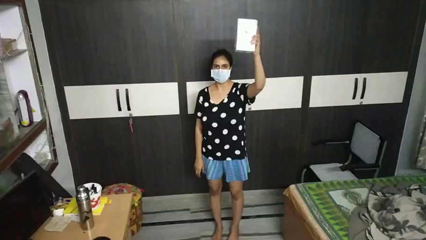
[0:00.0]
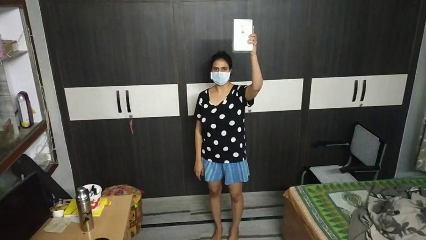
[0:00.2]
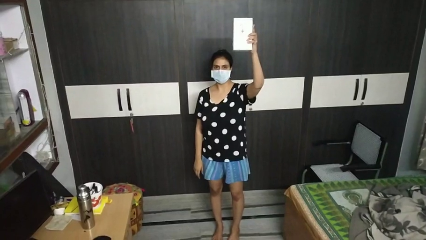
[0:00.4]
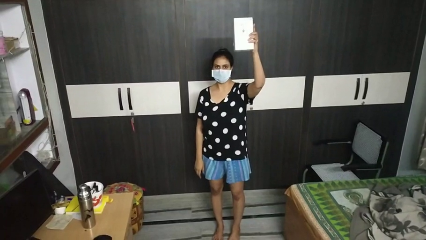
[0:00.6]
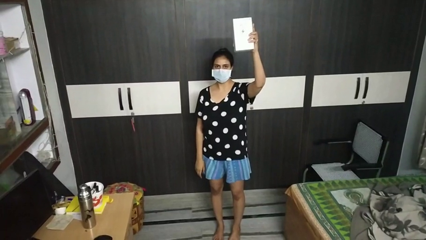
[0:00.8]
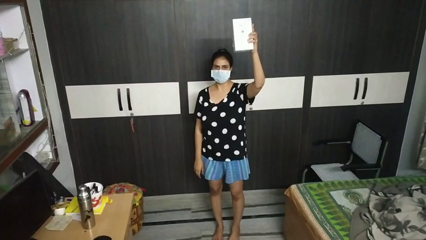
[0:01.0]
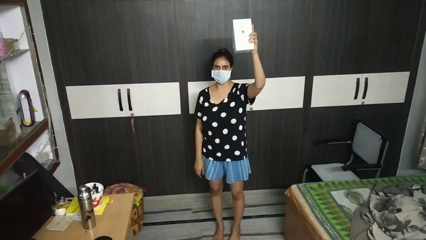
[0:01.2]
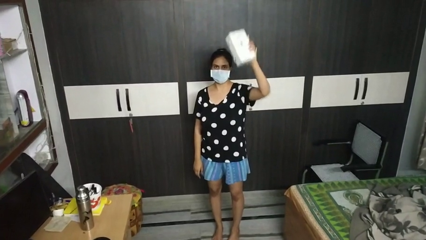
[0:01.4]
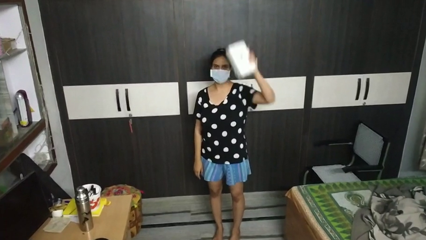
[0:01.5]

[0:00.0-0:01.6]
person holds object above head

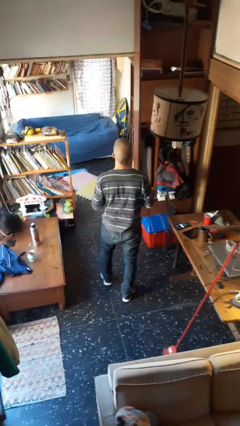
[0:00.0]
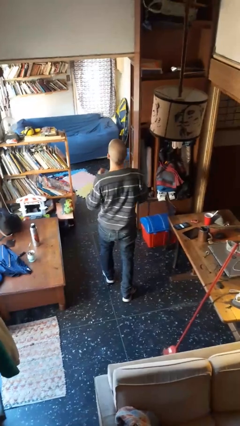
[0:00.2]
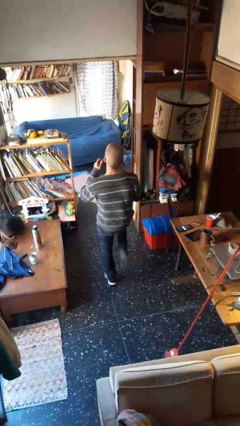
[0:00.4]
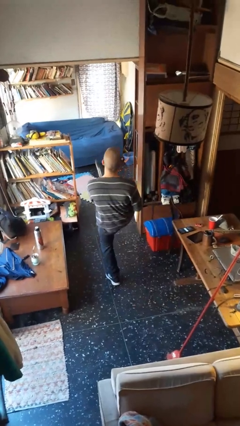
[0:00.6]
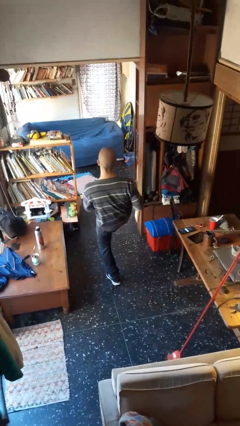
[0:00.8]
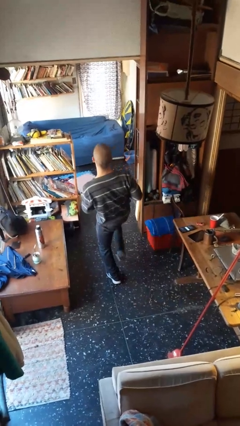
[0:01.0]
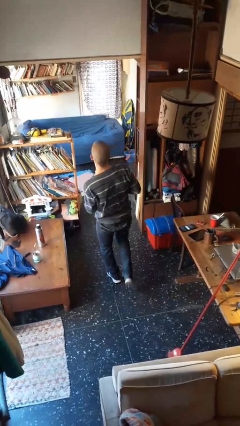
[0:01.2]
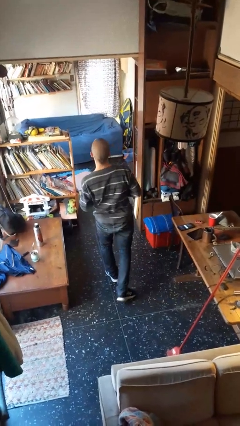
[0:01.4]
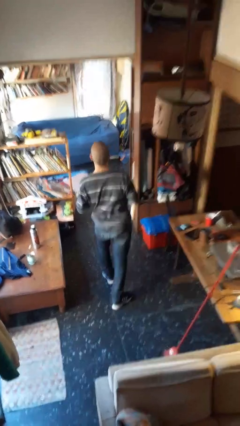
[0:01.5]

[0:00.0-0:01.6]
person karate kicks

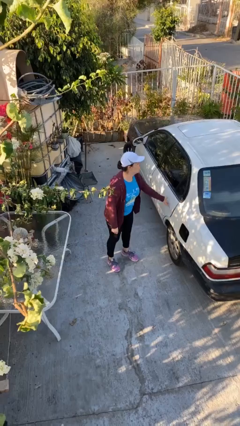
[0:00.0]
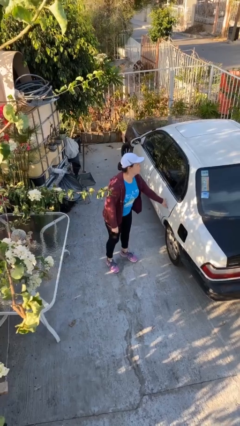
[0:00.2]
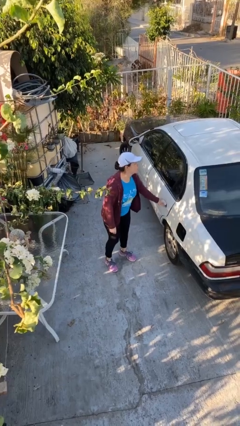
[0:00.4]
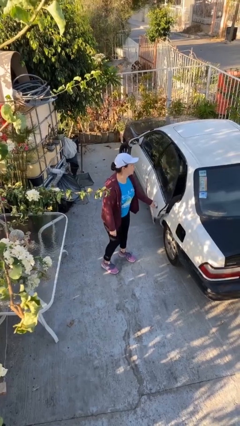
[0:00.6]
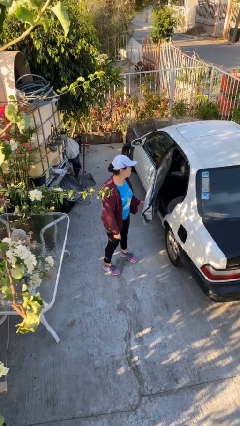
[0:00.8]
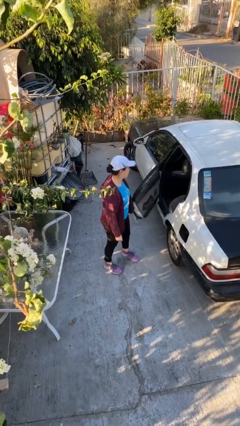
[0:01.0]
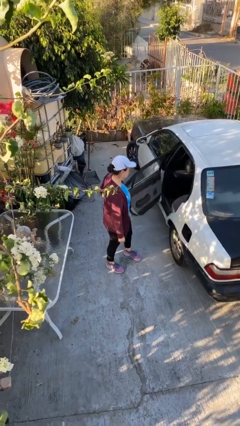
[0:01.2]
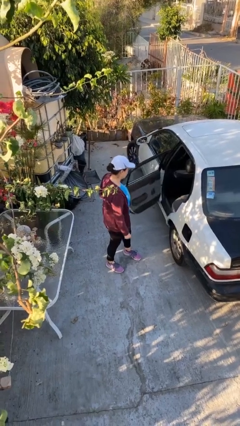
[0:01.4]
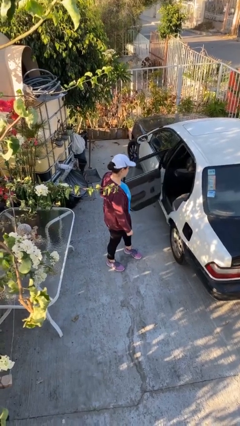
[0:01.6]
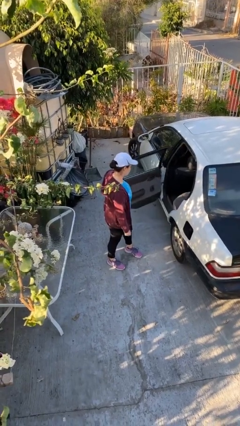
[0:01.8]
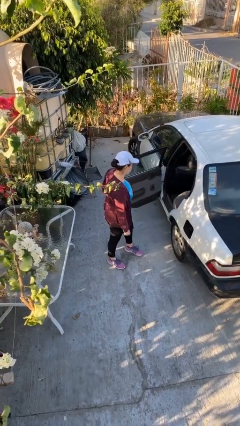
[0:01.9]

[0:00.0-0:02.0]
person opens car door

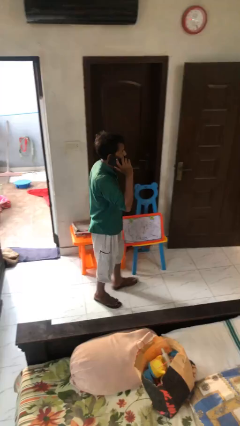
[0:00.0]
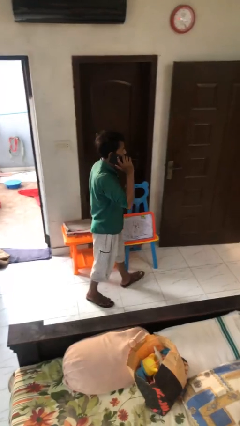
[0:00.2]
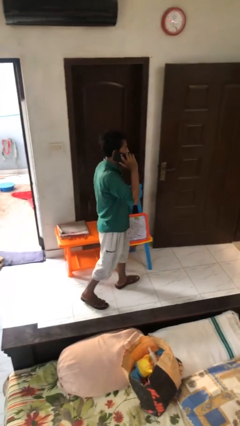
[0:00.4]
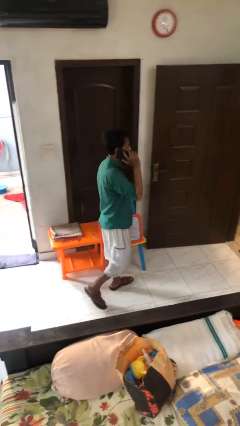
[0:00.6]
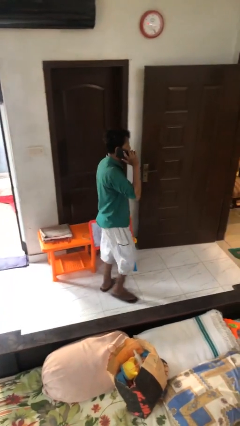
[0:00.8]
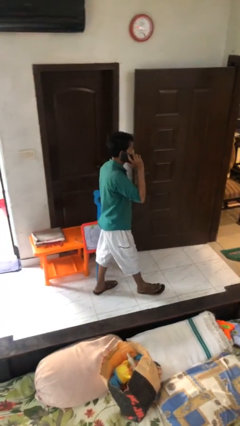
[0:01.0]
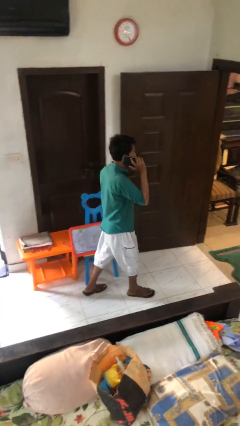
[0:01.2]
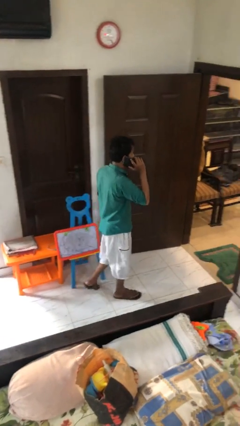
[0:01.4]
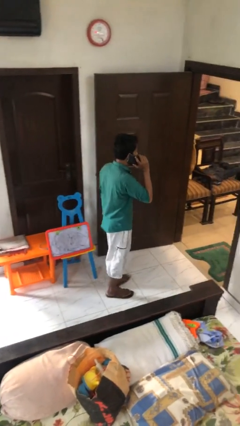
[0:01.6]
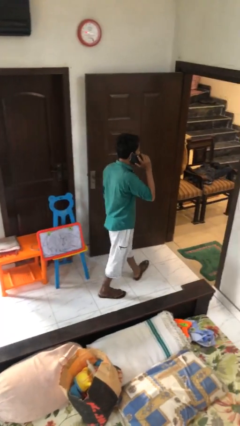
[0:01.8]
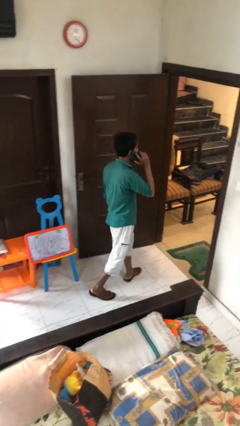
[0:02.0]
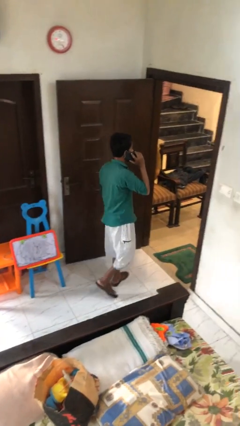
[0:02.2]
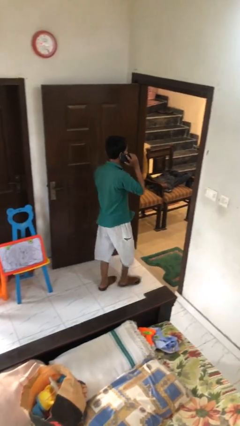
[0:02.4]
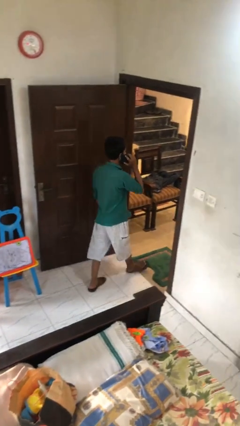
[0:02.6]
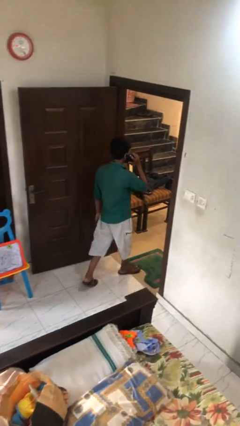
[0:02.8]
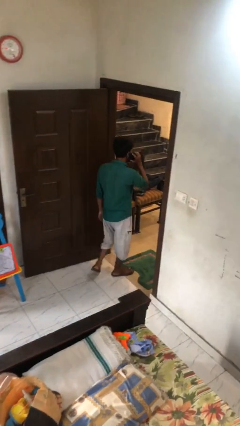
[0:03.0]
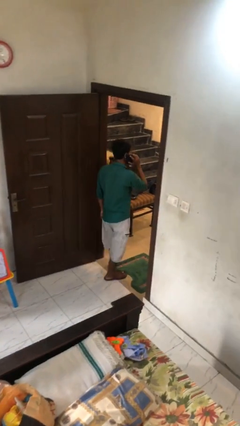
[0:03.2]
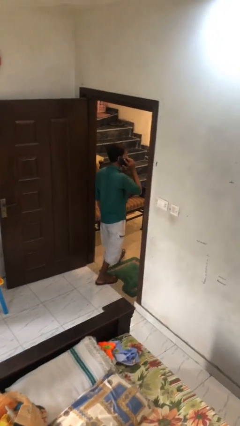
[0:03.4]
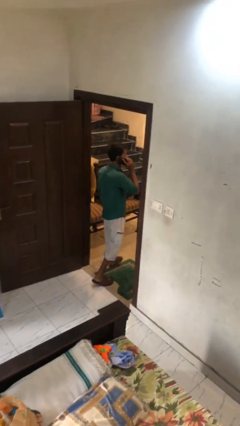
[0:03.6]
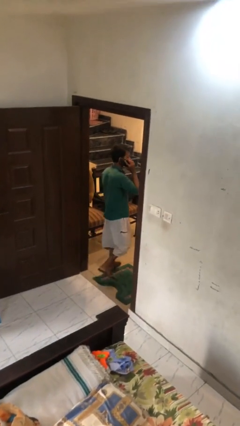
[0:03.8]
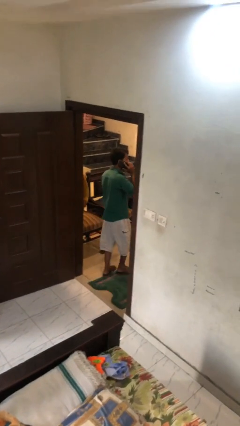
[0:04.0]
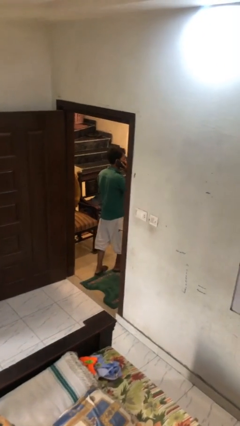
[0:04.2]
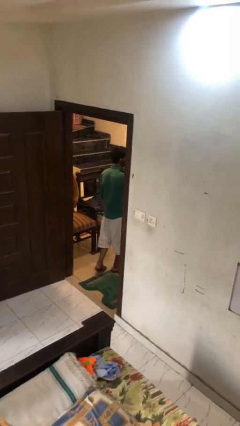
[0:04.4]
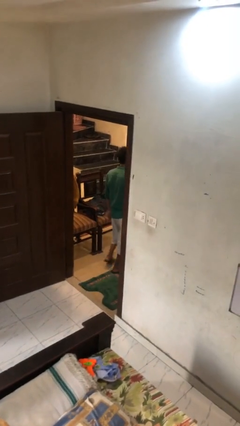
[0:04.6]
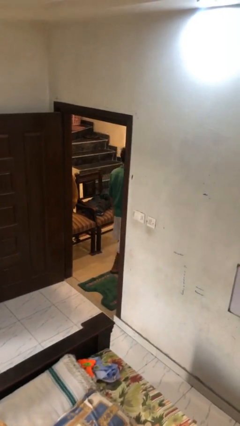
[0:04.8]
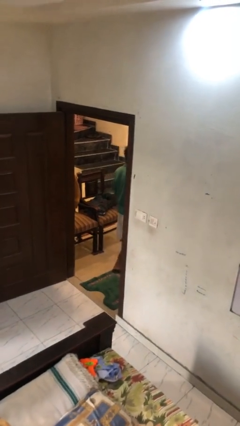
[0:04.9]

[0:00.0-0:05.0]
person exits scene through structure

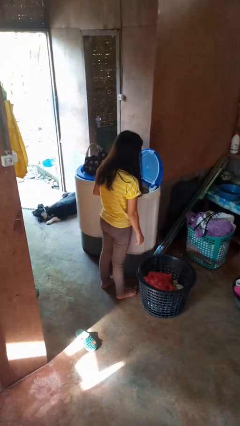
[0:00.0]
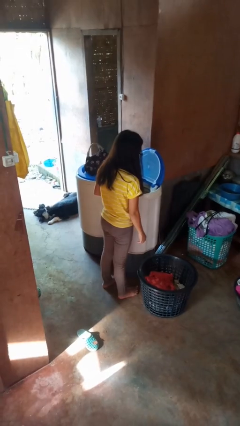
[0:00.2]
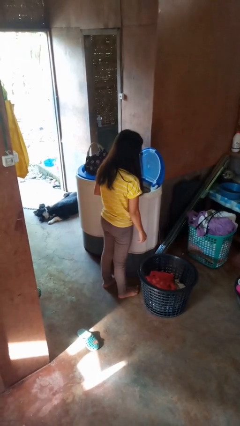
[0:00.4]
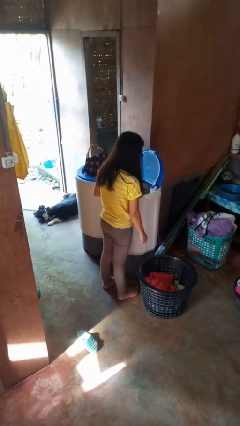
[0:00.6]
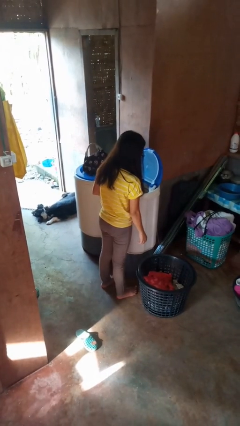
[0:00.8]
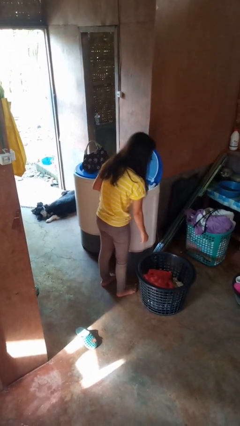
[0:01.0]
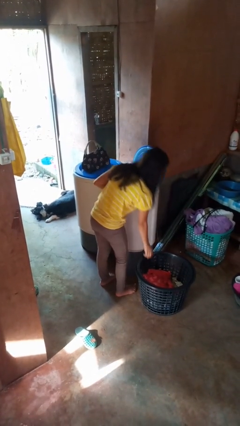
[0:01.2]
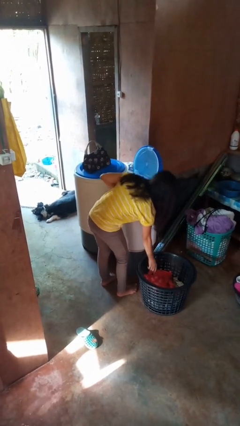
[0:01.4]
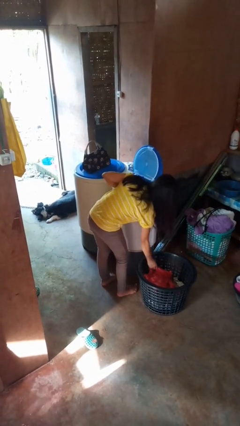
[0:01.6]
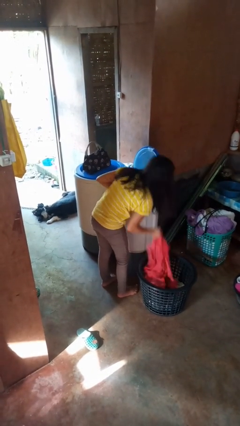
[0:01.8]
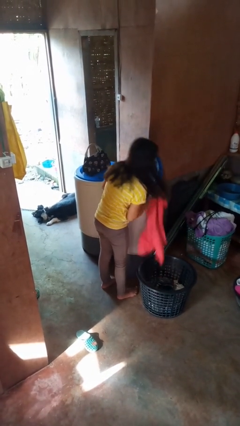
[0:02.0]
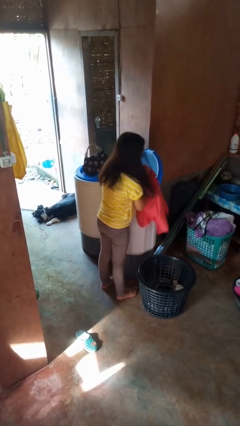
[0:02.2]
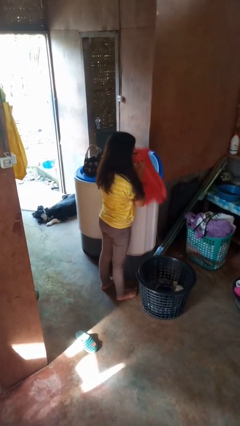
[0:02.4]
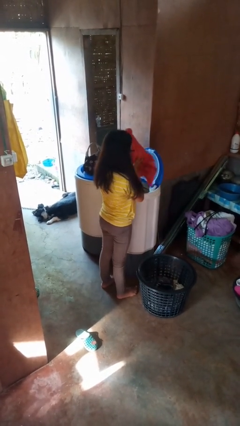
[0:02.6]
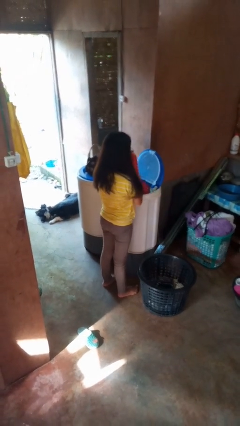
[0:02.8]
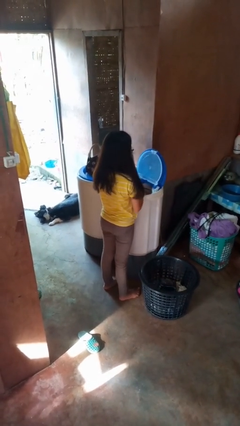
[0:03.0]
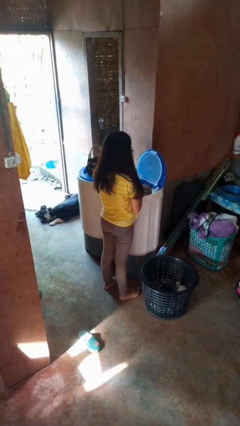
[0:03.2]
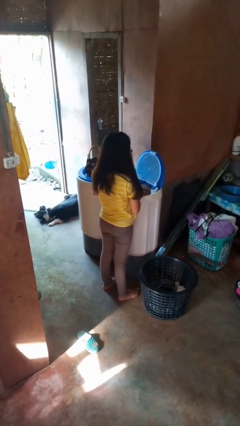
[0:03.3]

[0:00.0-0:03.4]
person loads clotheswasher

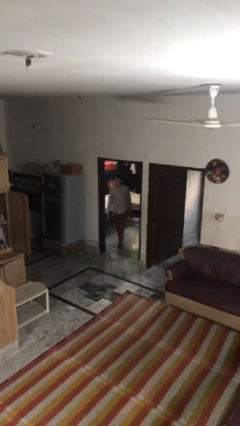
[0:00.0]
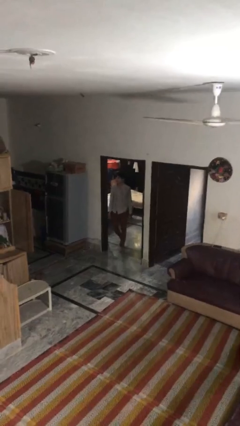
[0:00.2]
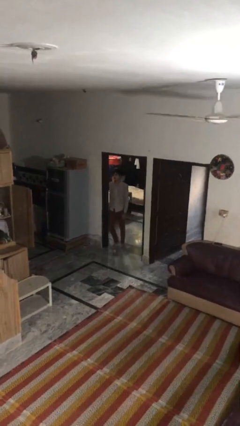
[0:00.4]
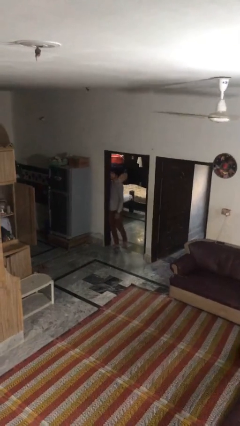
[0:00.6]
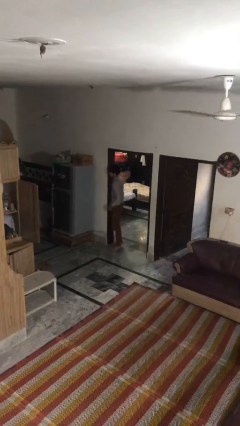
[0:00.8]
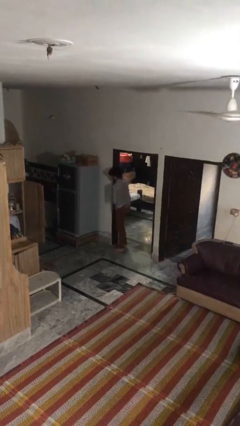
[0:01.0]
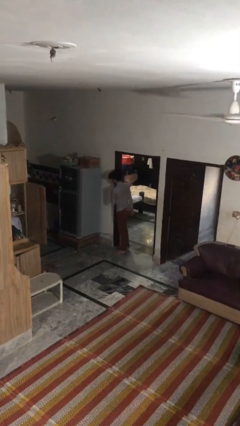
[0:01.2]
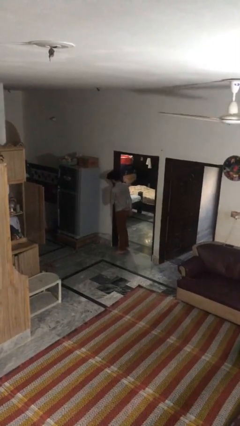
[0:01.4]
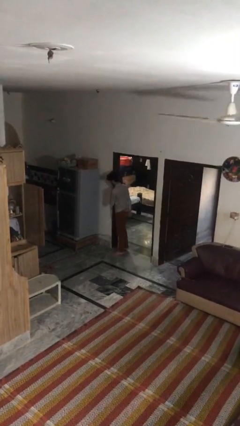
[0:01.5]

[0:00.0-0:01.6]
person bumps into wall

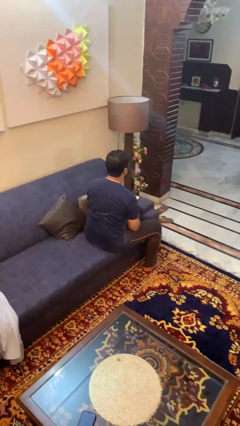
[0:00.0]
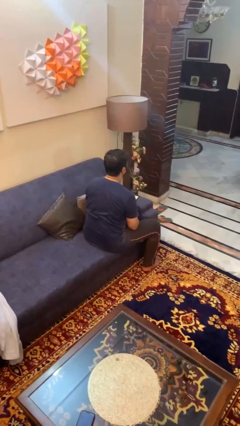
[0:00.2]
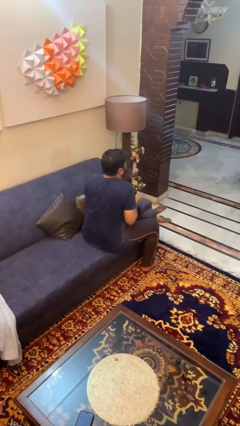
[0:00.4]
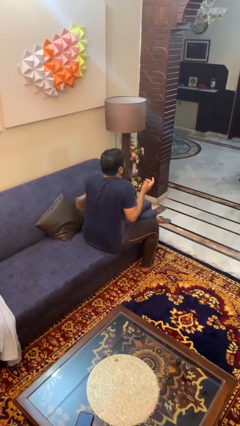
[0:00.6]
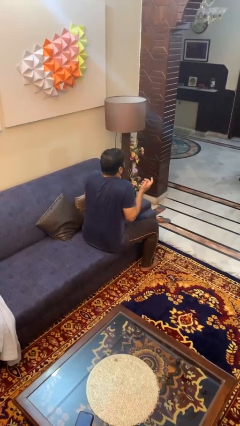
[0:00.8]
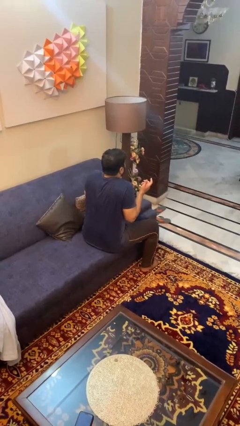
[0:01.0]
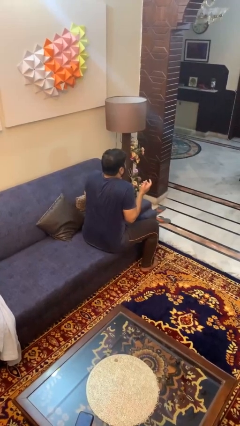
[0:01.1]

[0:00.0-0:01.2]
person shrugs

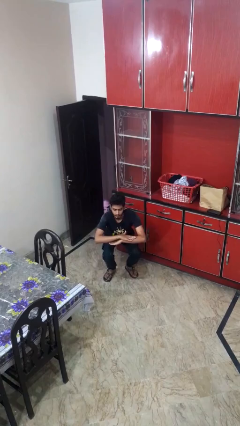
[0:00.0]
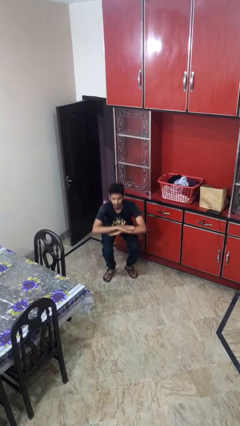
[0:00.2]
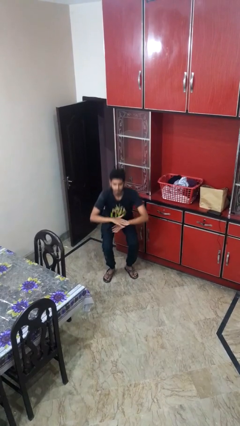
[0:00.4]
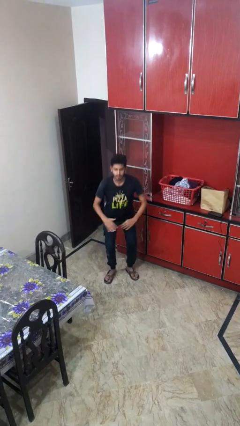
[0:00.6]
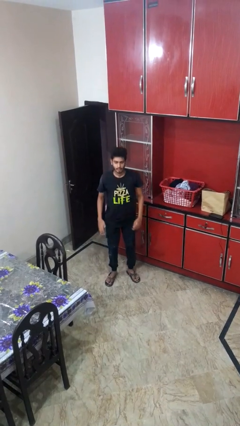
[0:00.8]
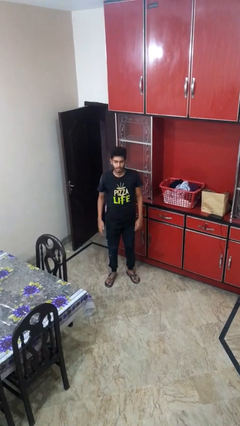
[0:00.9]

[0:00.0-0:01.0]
person stands up
